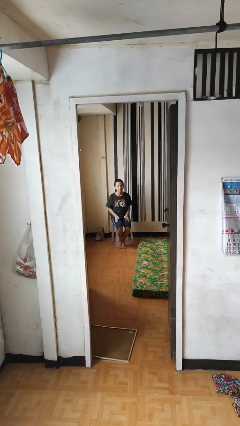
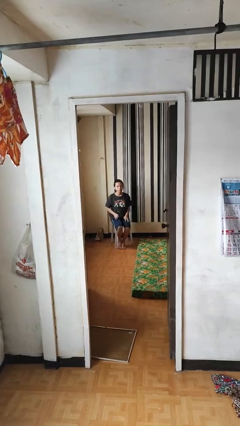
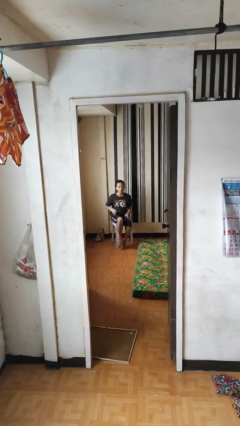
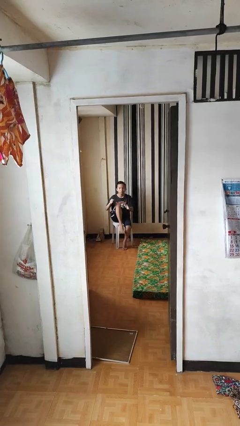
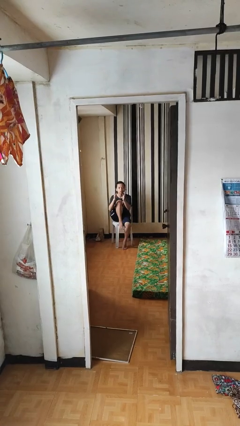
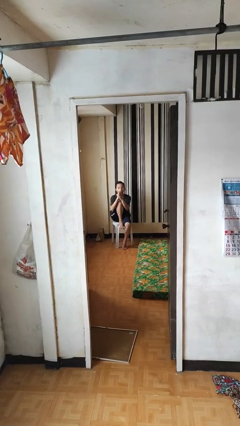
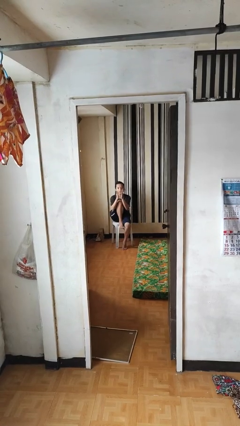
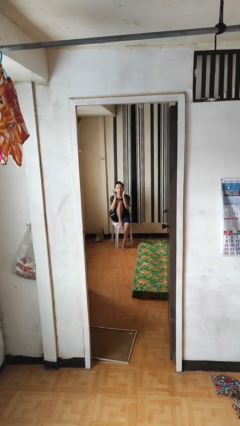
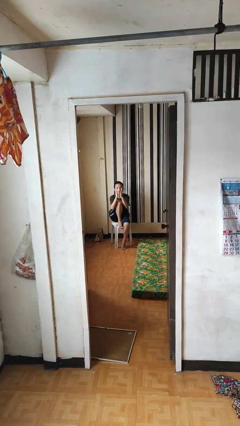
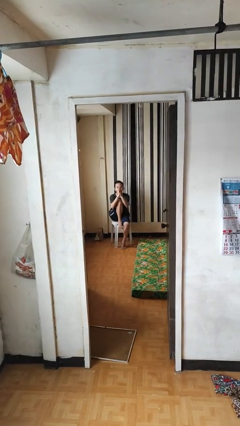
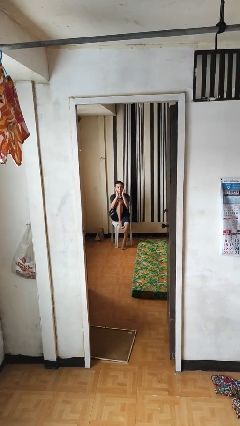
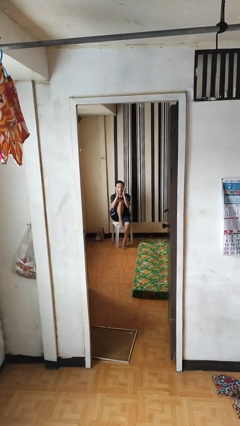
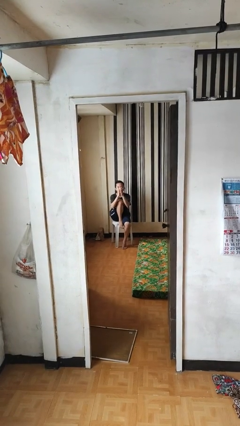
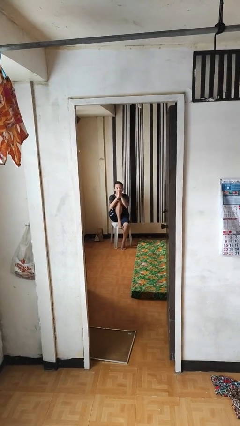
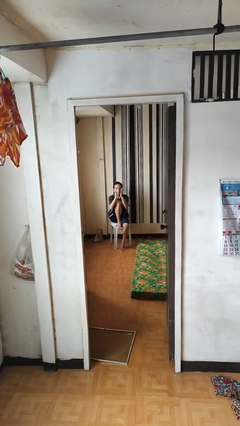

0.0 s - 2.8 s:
person claps hands

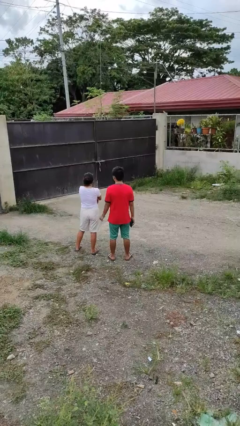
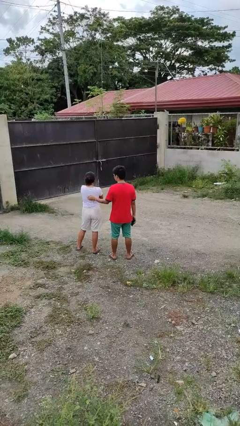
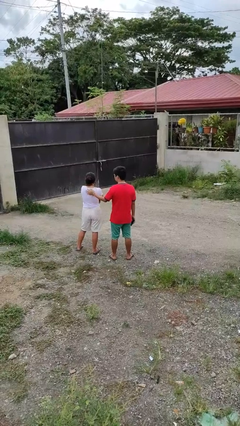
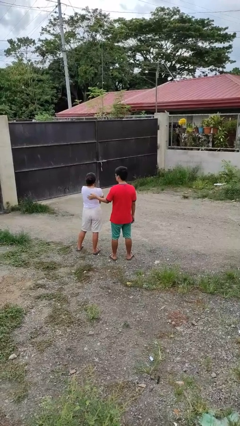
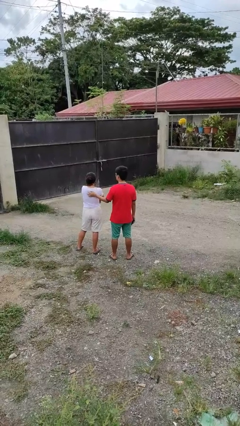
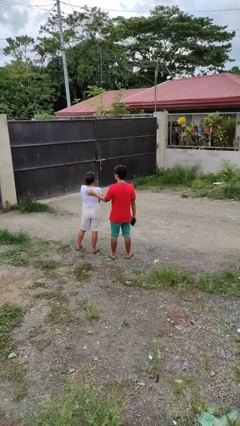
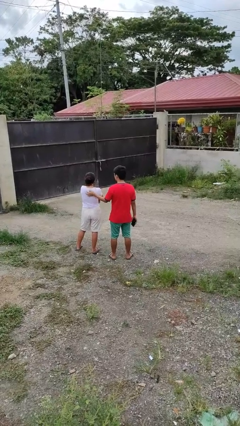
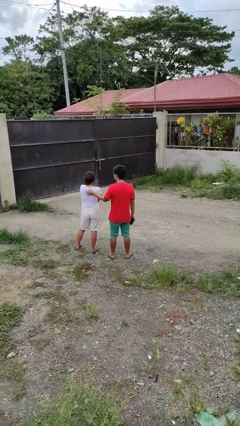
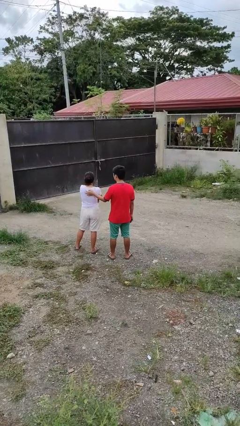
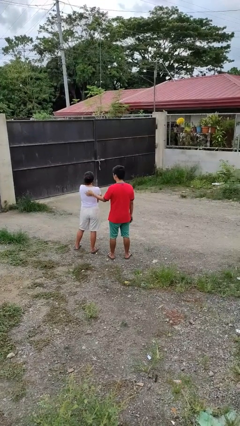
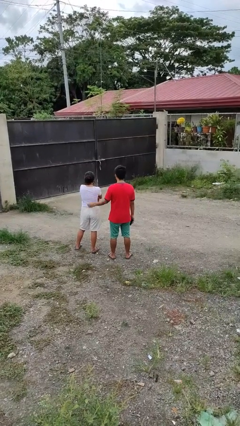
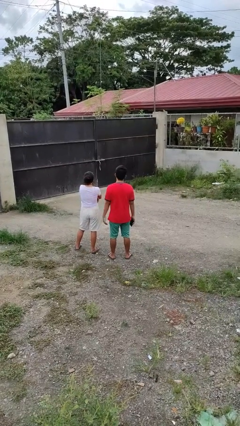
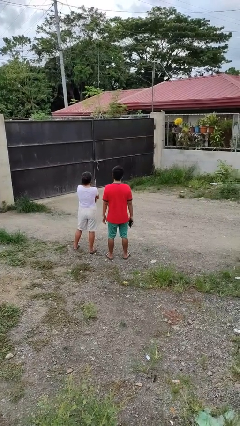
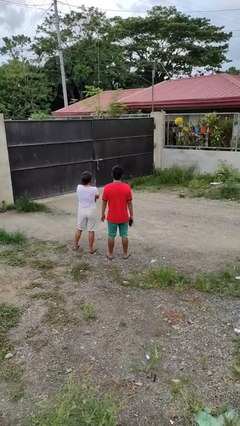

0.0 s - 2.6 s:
person touches back of person

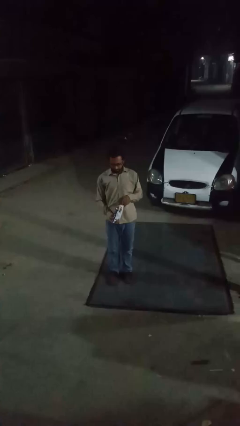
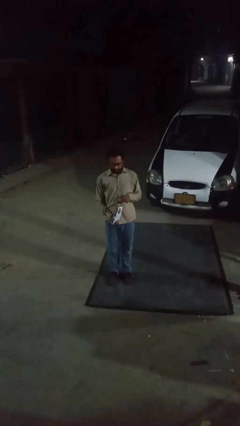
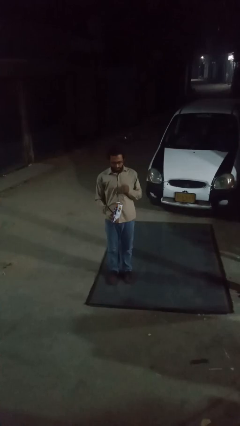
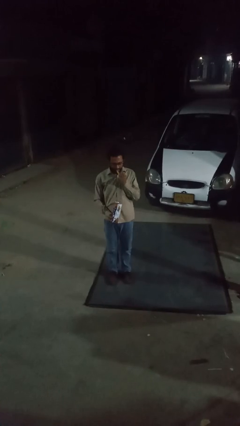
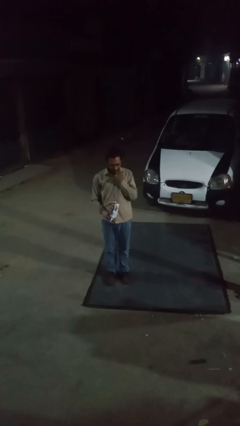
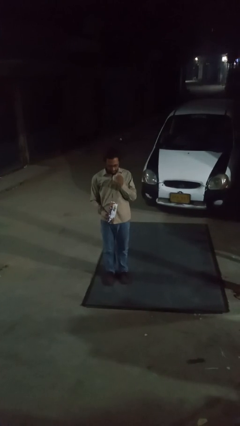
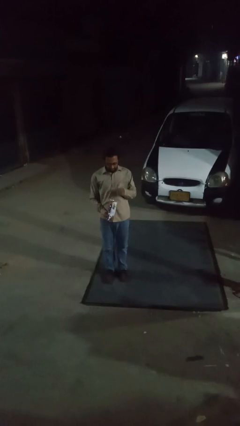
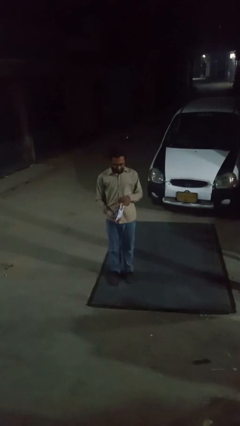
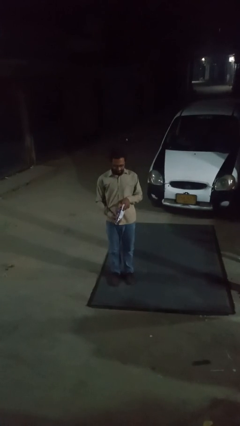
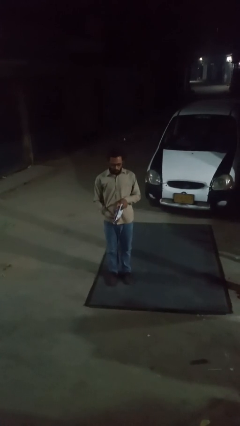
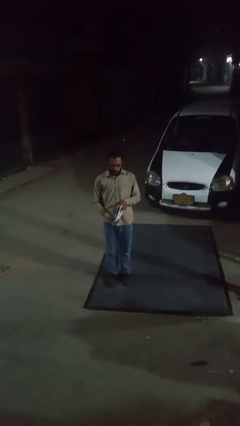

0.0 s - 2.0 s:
person eats snack from bag

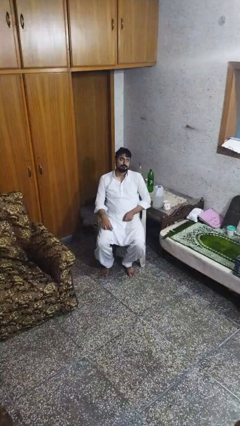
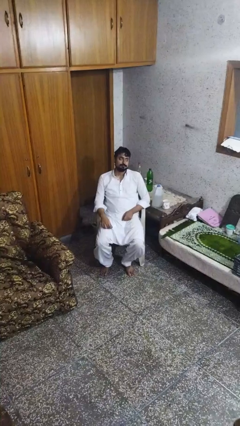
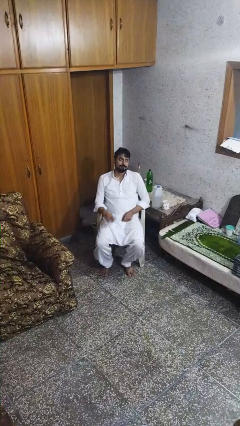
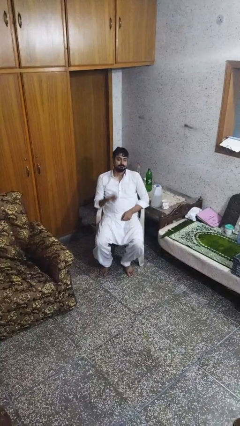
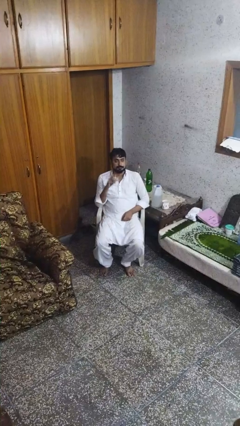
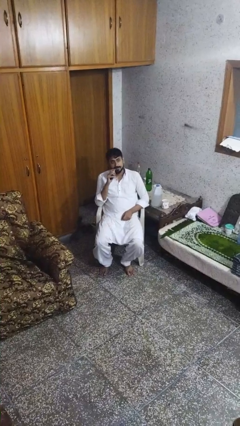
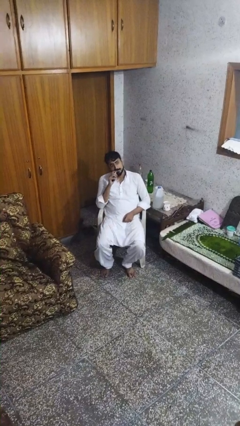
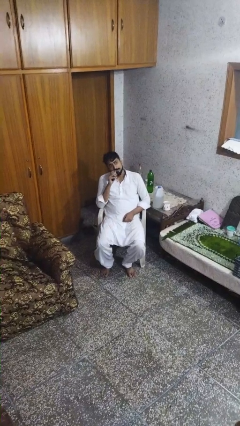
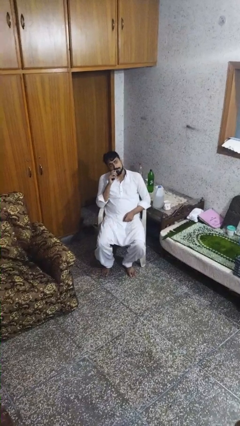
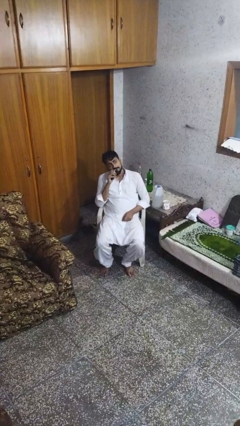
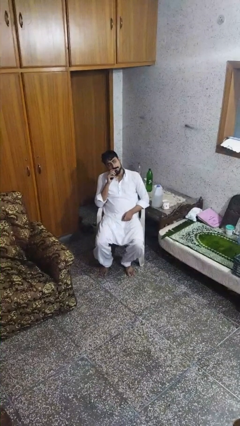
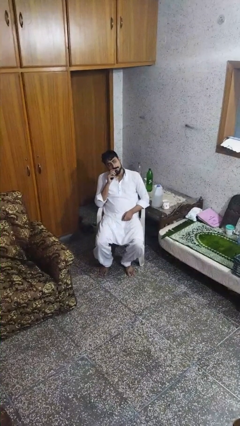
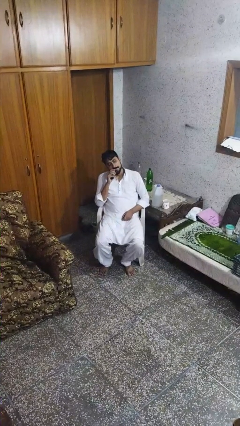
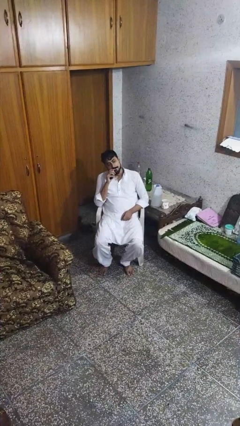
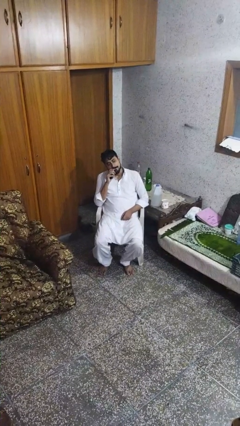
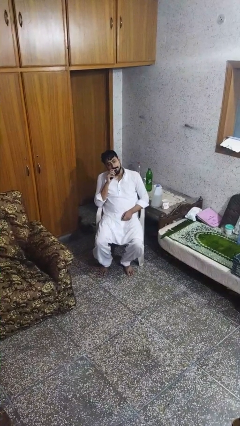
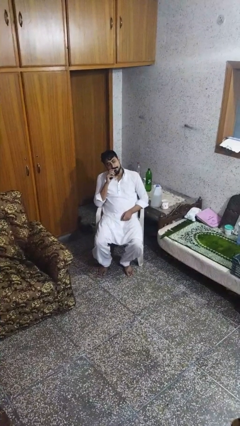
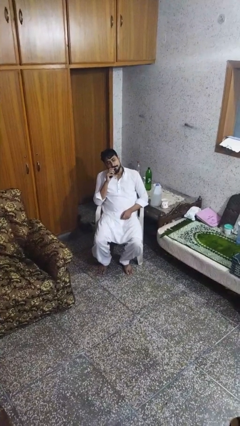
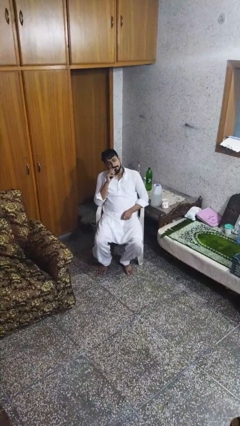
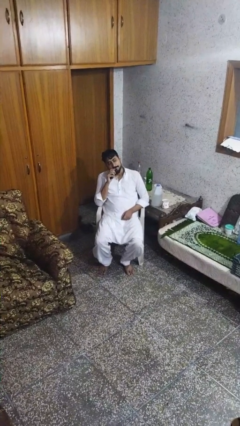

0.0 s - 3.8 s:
person vapes

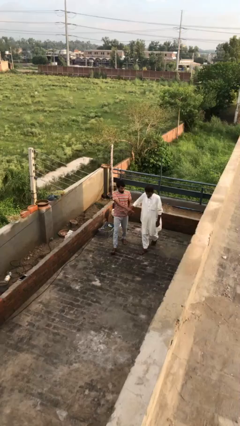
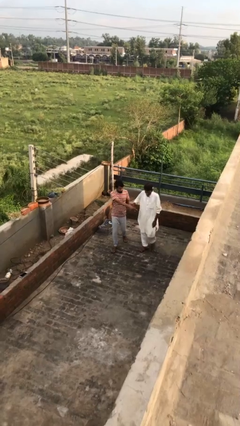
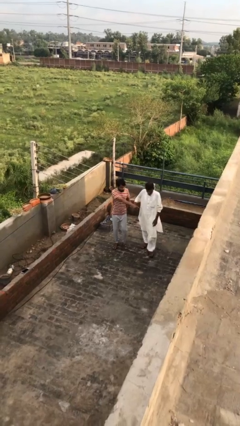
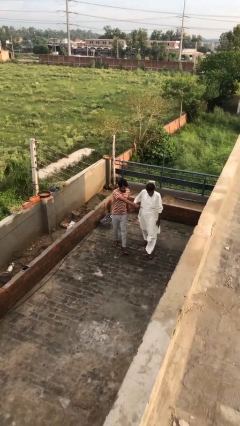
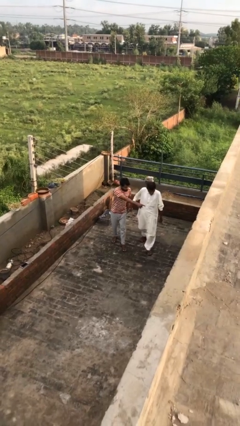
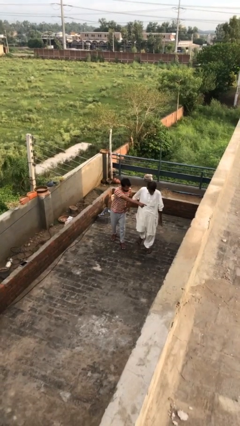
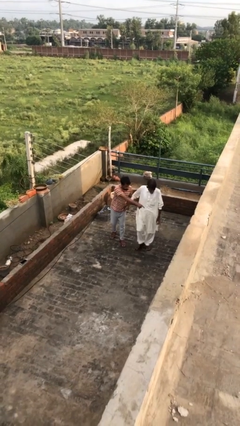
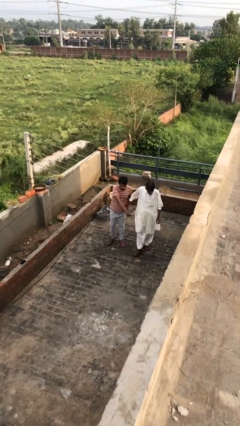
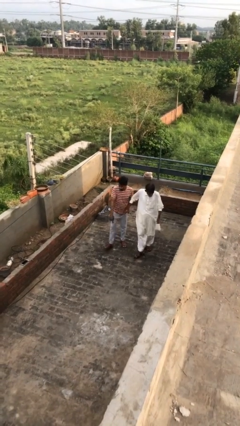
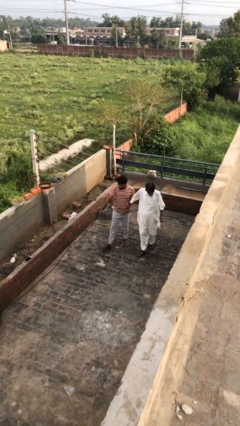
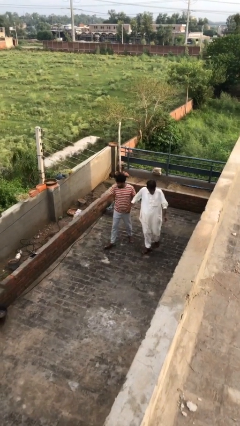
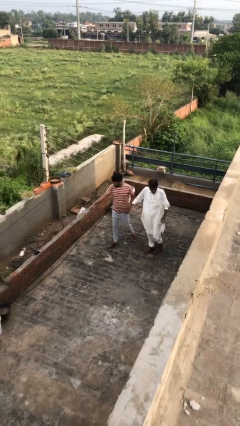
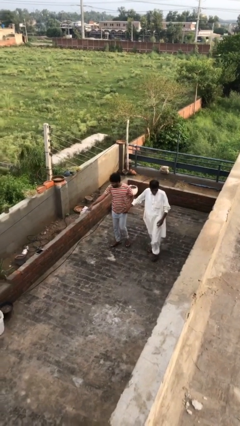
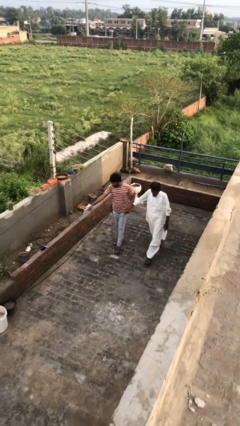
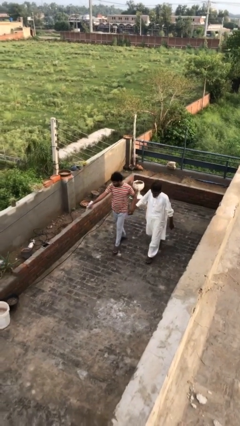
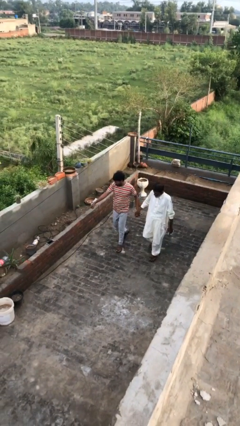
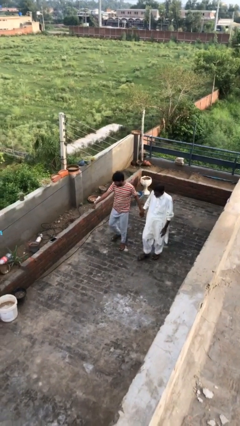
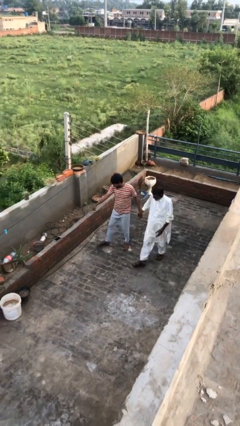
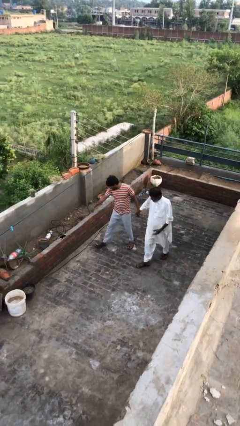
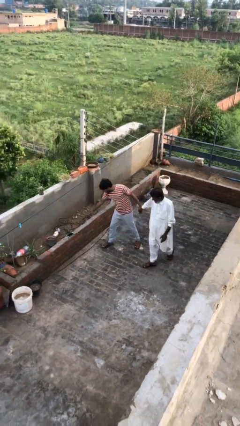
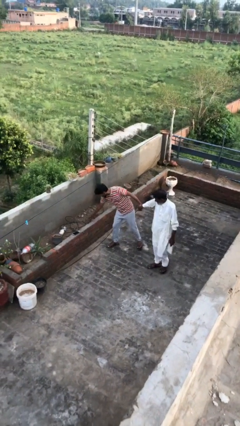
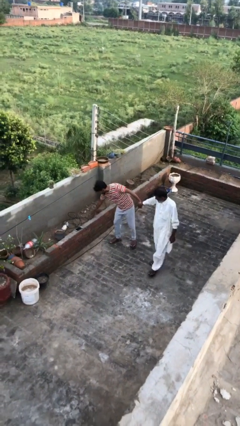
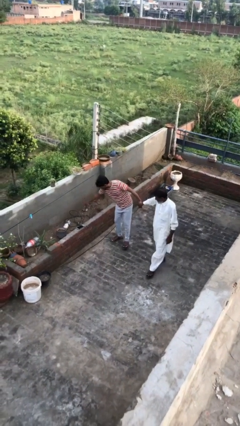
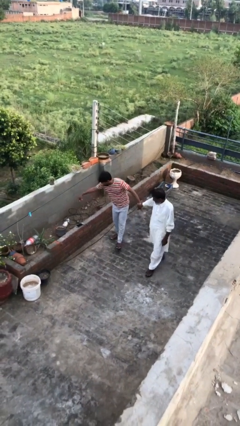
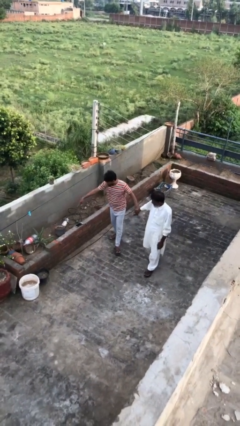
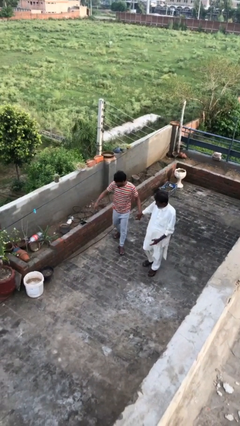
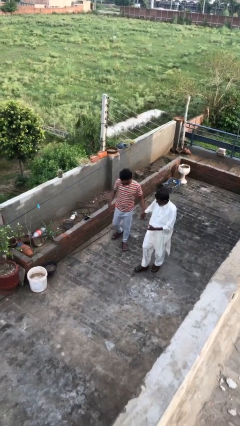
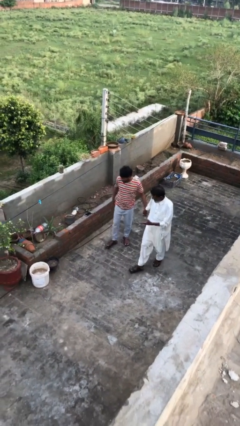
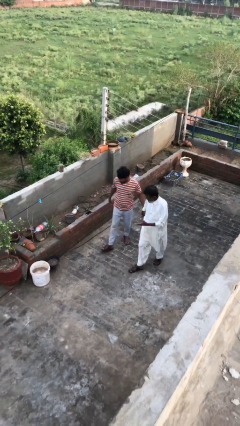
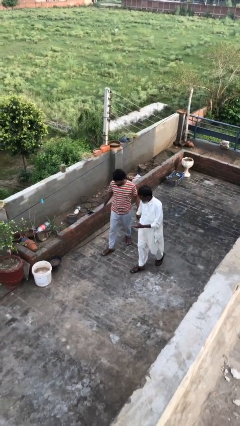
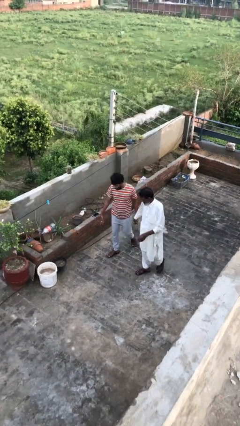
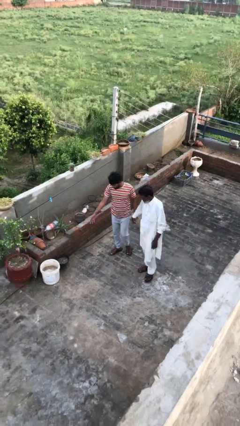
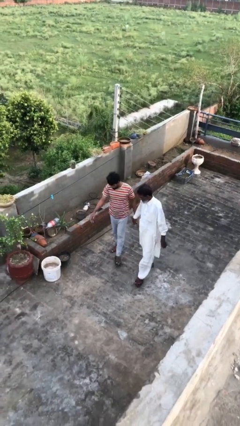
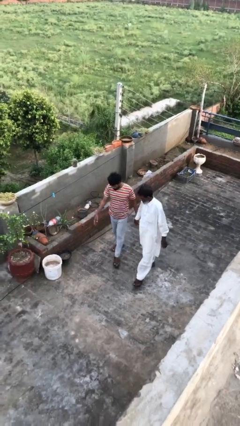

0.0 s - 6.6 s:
person holds hand
